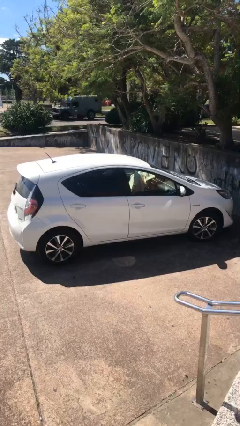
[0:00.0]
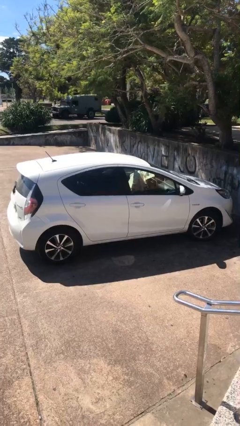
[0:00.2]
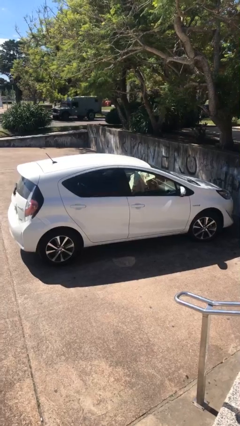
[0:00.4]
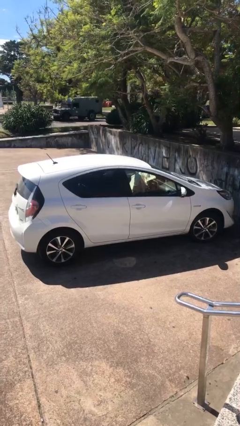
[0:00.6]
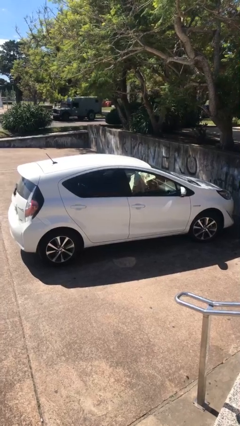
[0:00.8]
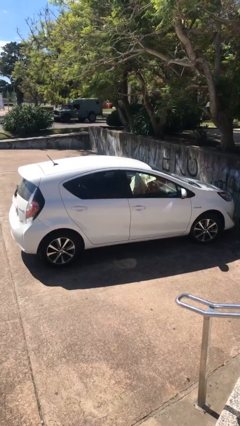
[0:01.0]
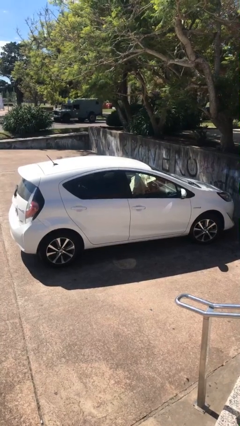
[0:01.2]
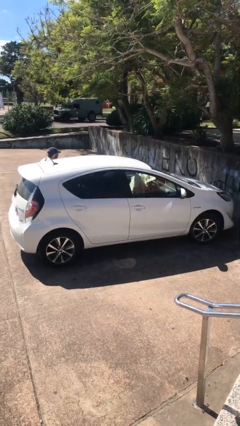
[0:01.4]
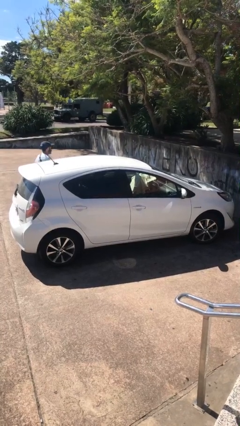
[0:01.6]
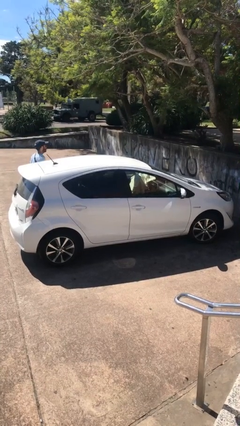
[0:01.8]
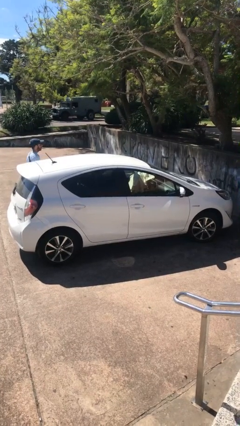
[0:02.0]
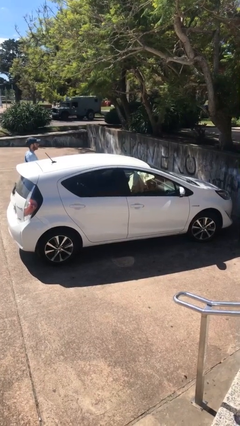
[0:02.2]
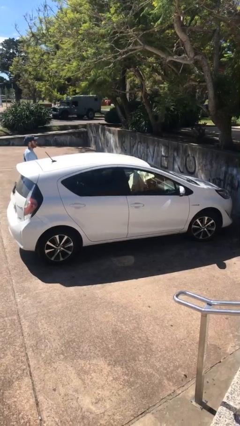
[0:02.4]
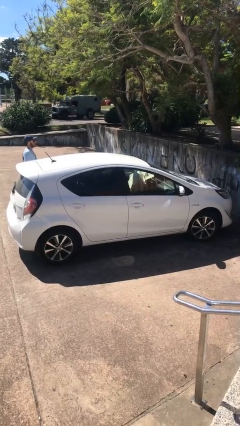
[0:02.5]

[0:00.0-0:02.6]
car drops off person

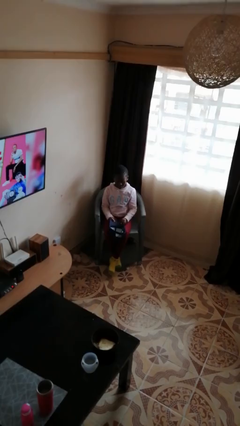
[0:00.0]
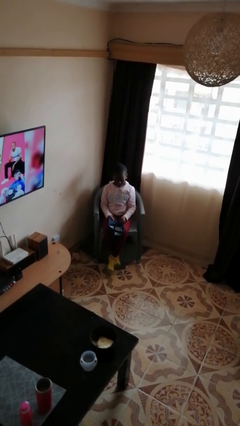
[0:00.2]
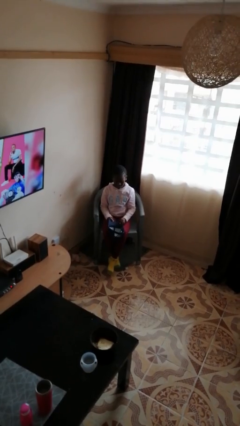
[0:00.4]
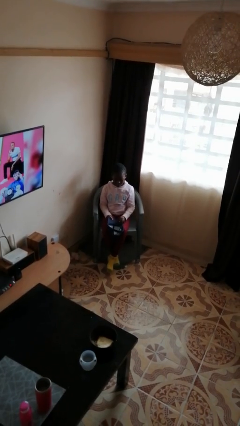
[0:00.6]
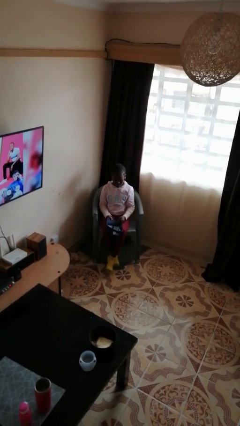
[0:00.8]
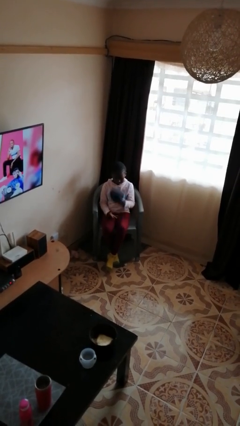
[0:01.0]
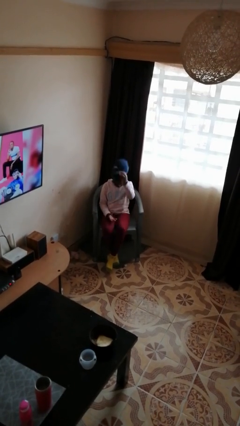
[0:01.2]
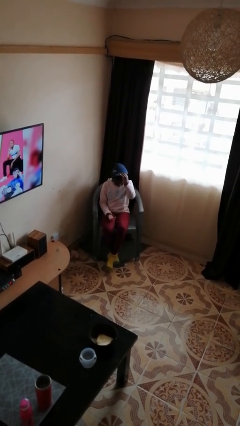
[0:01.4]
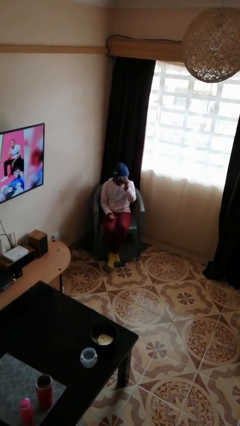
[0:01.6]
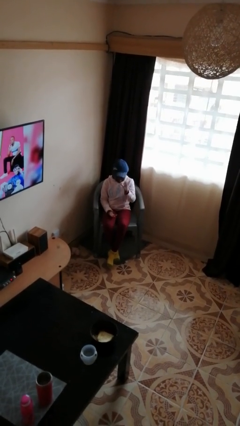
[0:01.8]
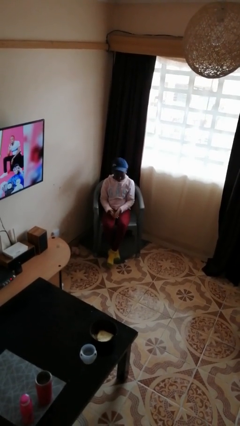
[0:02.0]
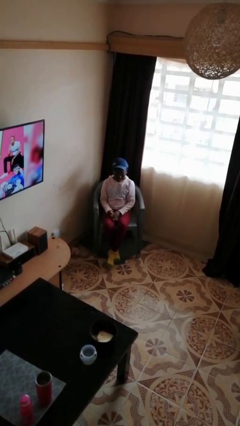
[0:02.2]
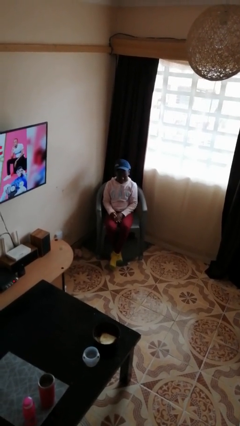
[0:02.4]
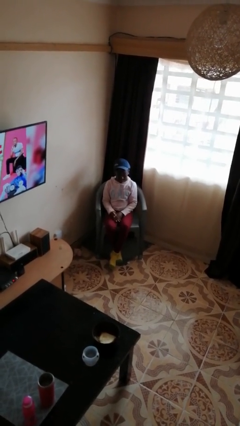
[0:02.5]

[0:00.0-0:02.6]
person puts on hat

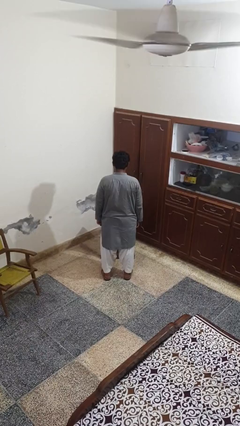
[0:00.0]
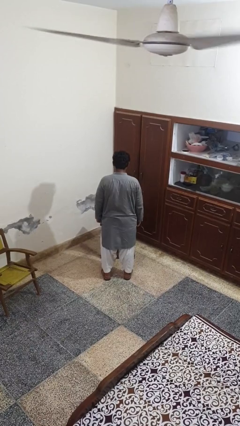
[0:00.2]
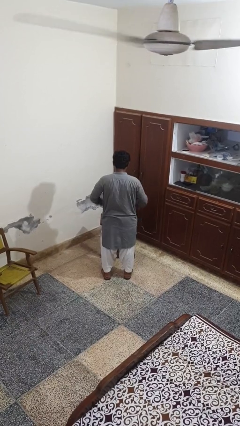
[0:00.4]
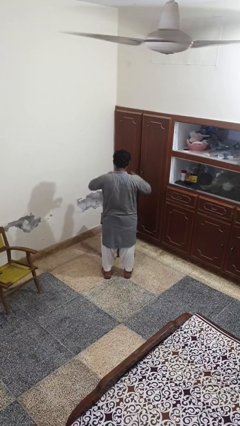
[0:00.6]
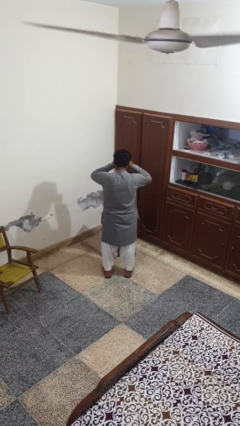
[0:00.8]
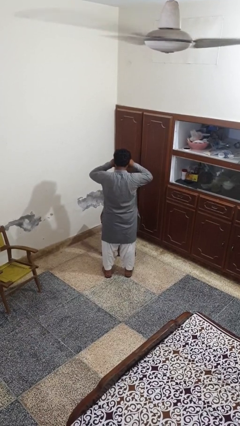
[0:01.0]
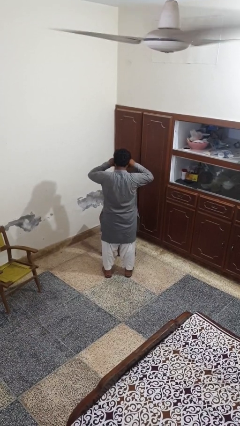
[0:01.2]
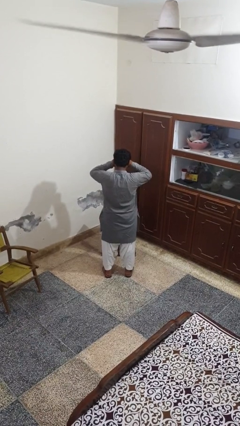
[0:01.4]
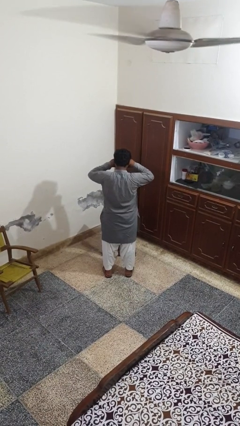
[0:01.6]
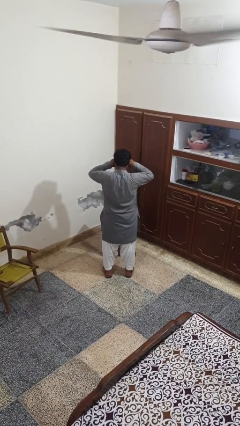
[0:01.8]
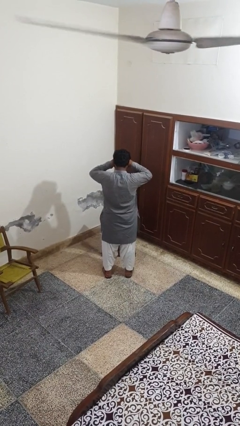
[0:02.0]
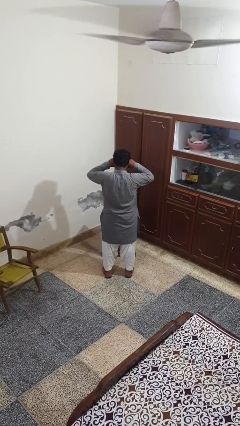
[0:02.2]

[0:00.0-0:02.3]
person rubs eyes

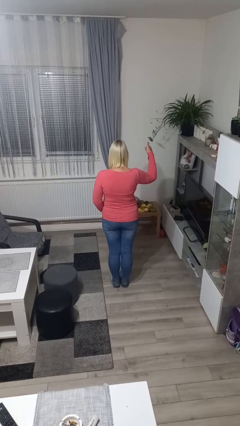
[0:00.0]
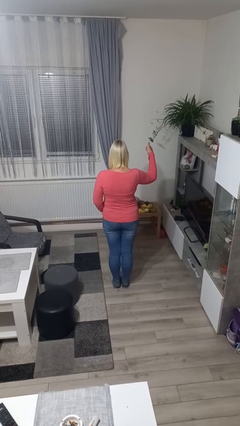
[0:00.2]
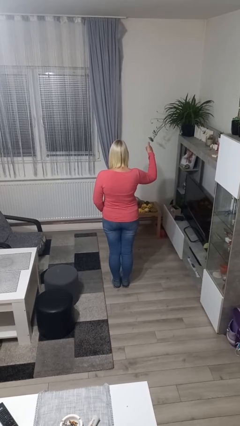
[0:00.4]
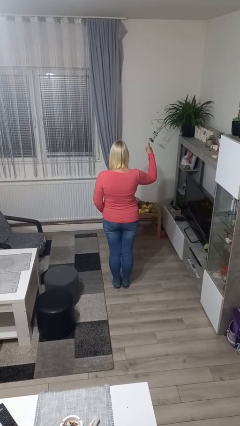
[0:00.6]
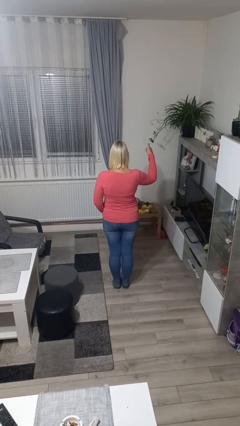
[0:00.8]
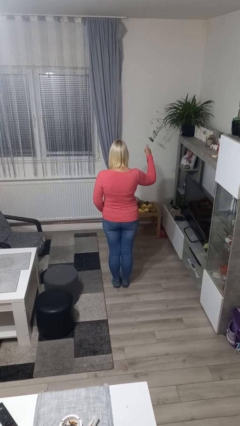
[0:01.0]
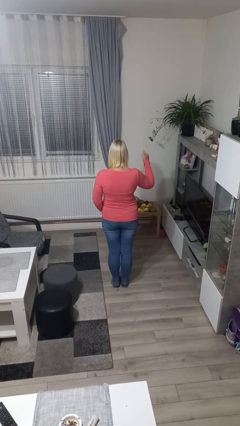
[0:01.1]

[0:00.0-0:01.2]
person gestures number one

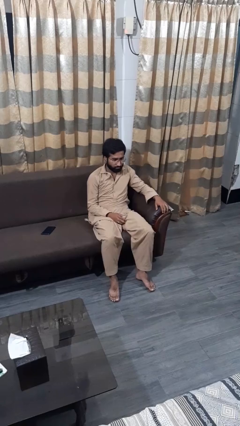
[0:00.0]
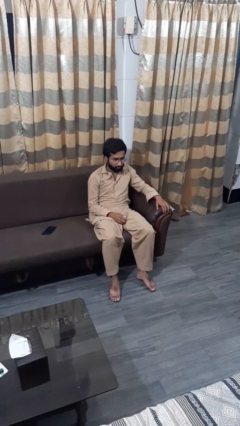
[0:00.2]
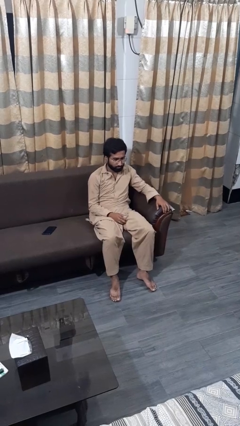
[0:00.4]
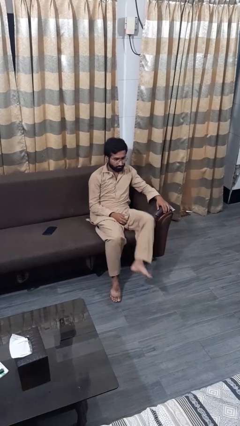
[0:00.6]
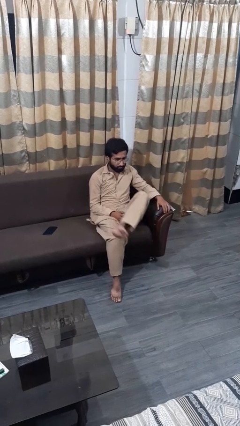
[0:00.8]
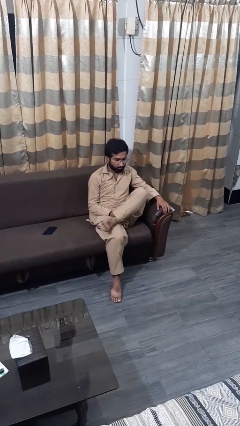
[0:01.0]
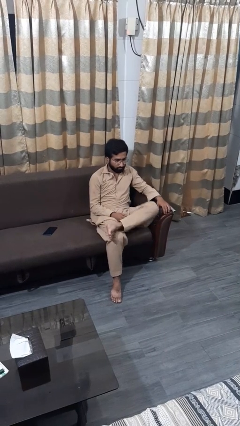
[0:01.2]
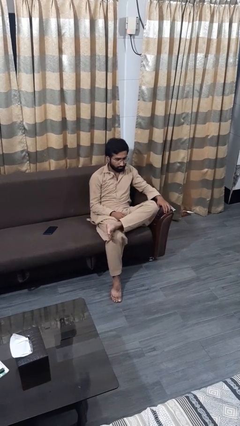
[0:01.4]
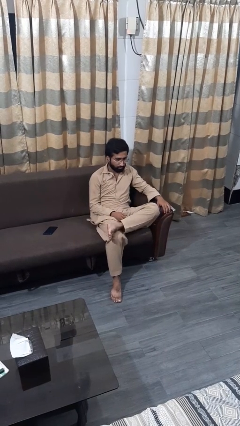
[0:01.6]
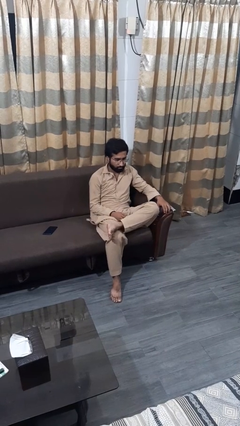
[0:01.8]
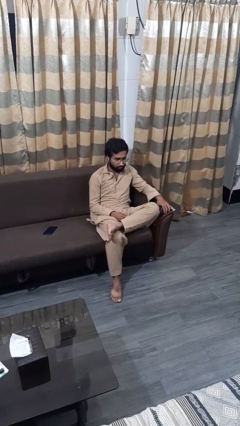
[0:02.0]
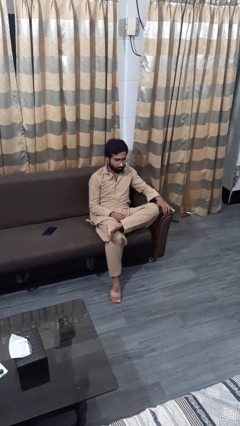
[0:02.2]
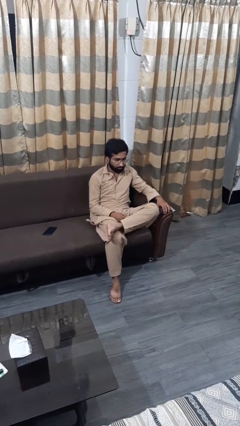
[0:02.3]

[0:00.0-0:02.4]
person crosses legs

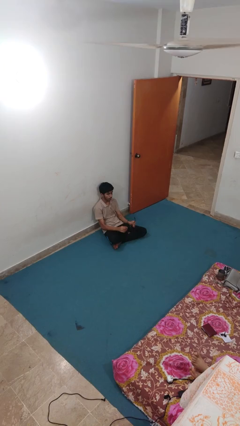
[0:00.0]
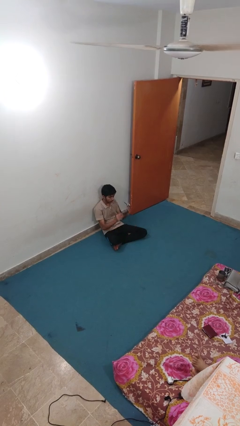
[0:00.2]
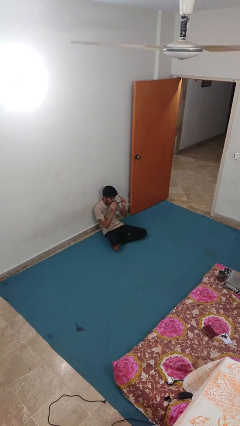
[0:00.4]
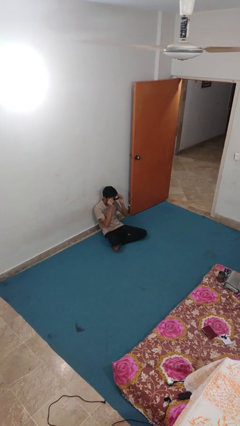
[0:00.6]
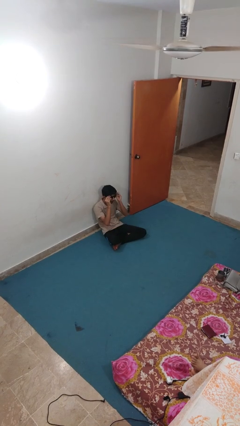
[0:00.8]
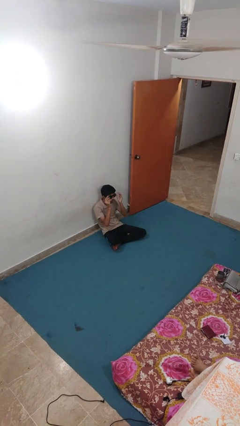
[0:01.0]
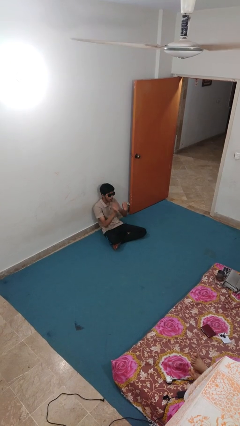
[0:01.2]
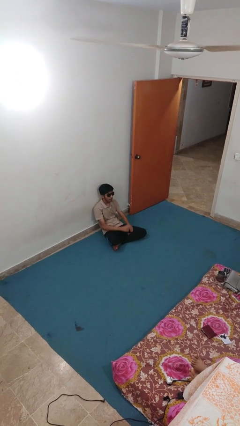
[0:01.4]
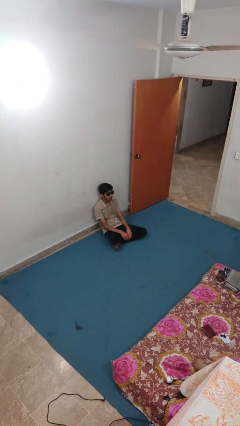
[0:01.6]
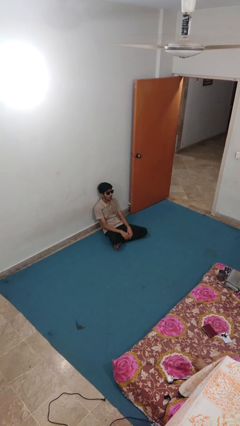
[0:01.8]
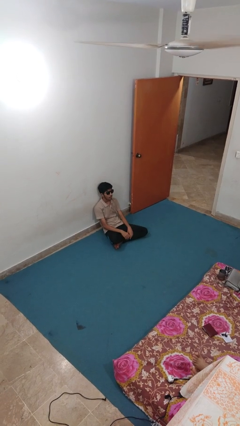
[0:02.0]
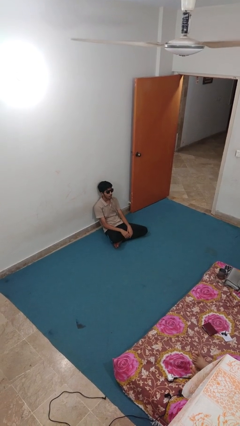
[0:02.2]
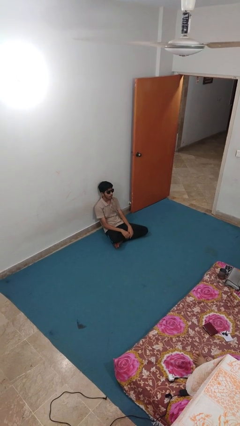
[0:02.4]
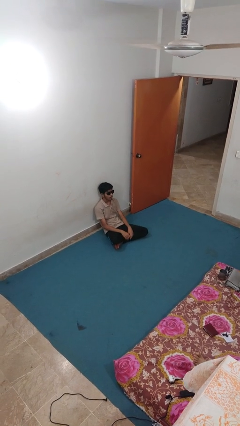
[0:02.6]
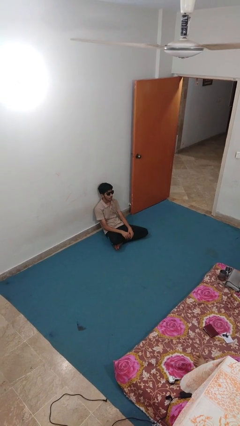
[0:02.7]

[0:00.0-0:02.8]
person puts on sunglasses

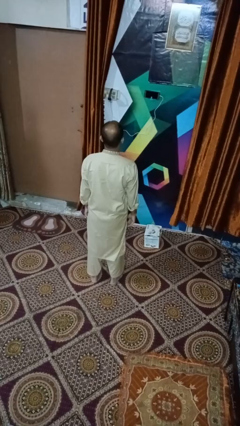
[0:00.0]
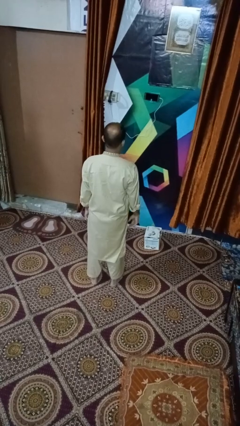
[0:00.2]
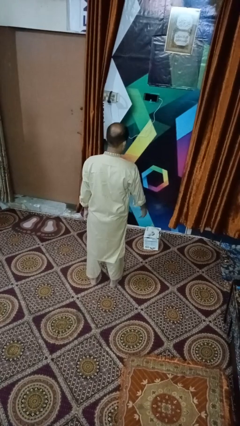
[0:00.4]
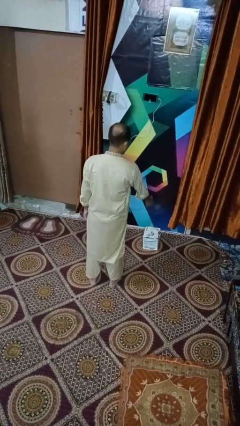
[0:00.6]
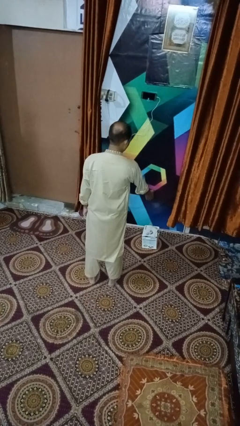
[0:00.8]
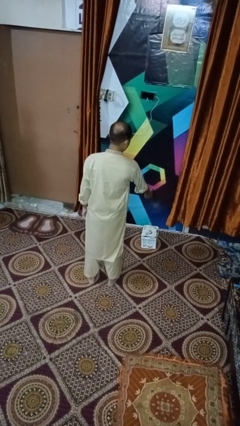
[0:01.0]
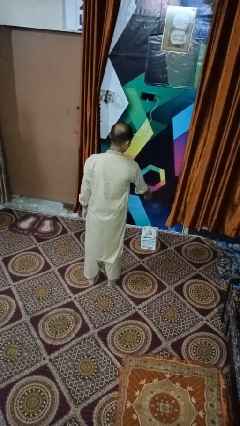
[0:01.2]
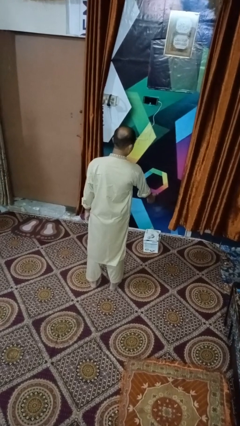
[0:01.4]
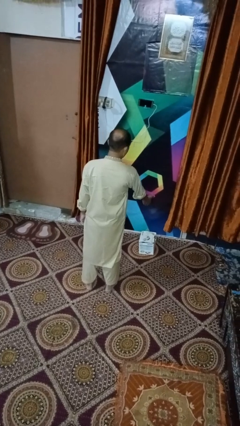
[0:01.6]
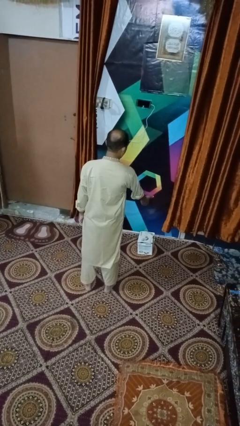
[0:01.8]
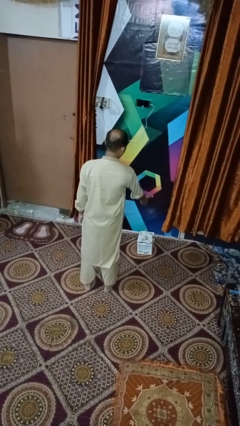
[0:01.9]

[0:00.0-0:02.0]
person waves hand over object

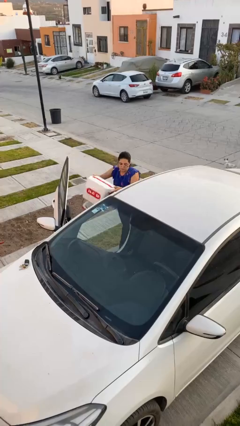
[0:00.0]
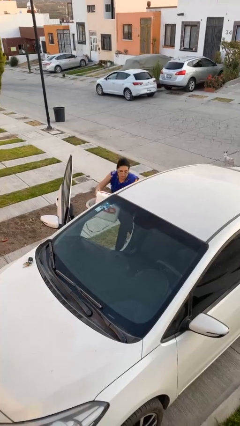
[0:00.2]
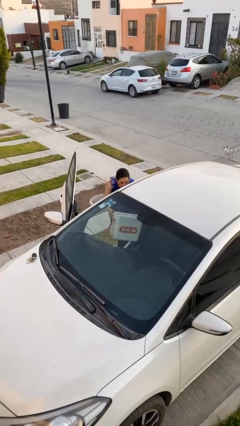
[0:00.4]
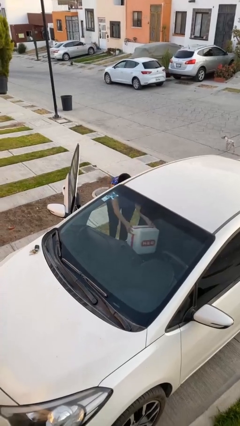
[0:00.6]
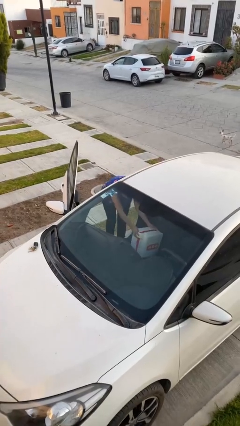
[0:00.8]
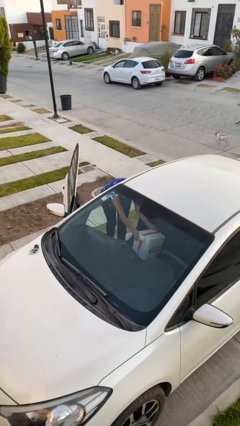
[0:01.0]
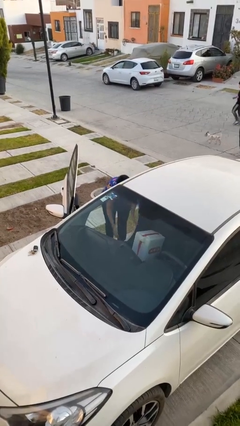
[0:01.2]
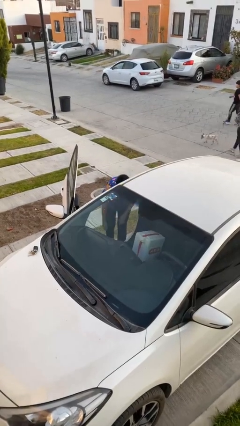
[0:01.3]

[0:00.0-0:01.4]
person loads car
